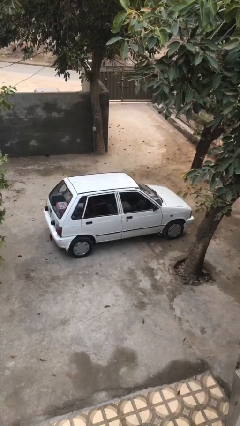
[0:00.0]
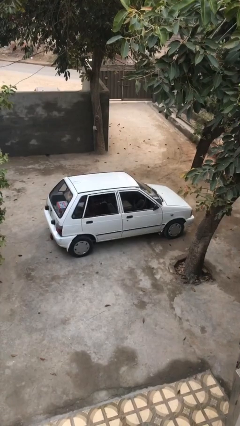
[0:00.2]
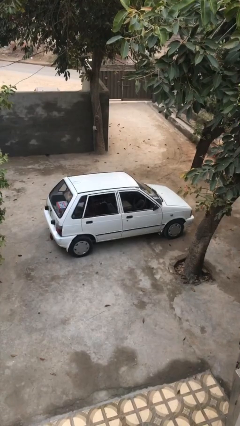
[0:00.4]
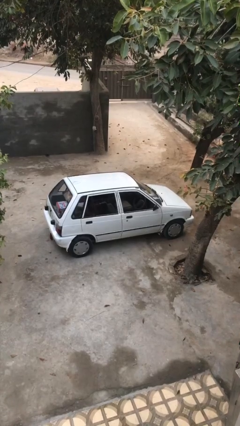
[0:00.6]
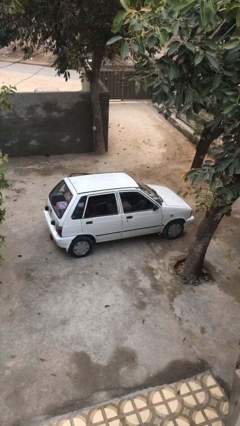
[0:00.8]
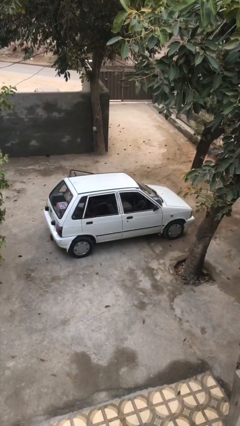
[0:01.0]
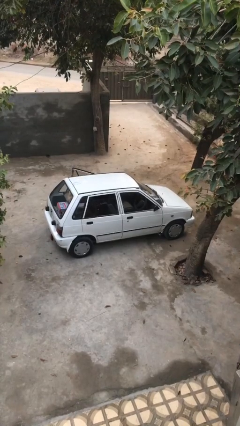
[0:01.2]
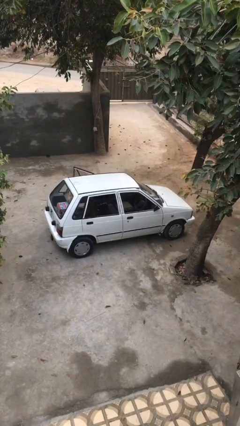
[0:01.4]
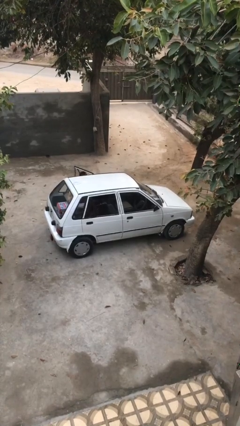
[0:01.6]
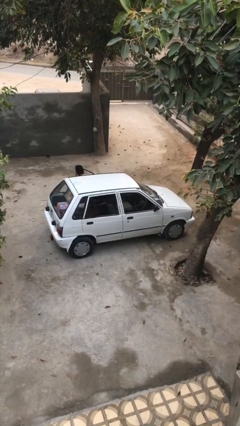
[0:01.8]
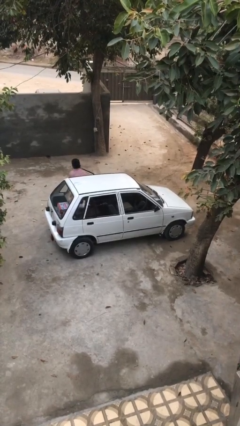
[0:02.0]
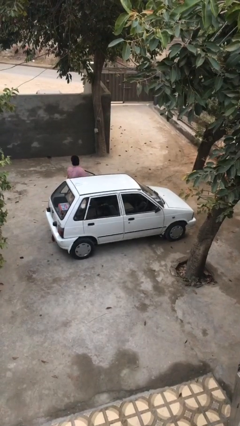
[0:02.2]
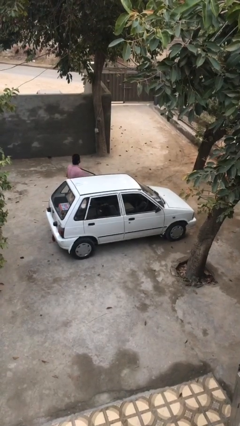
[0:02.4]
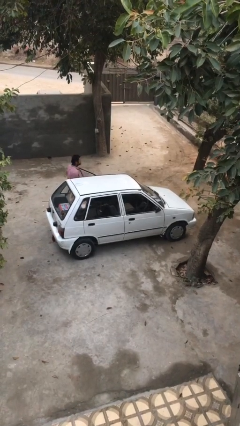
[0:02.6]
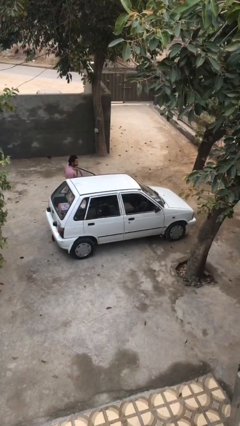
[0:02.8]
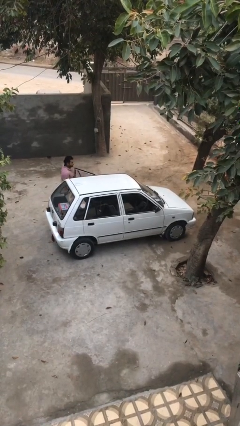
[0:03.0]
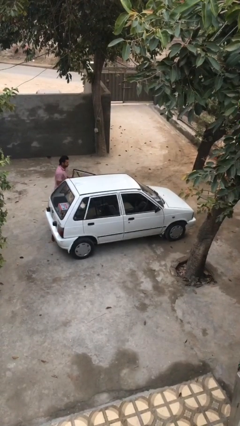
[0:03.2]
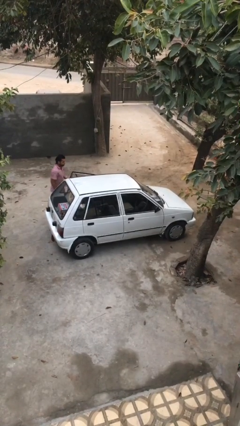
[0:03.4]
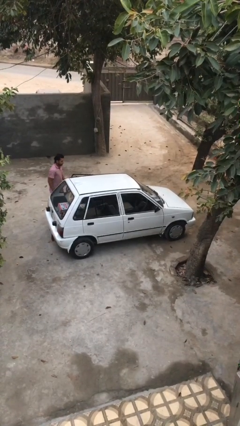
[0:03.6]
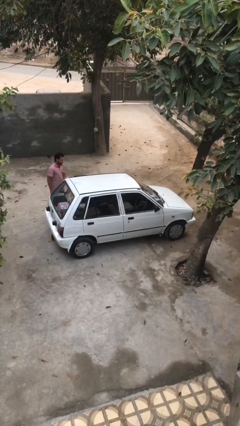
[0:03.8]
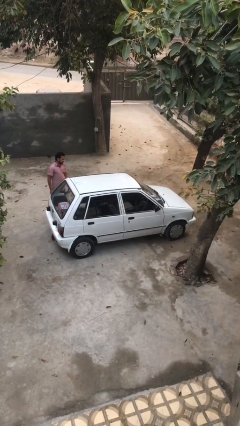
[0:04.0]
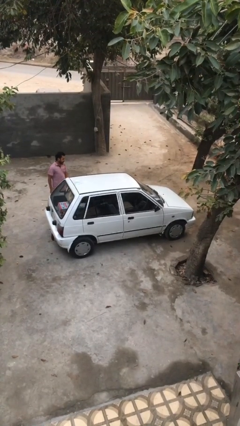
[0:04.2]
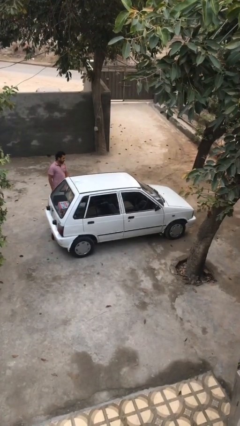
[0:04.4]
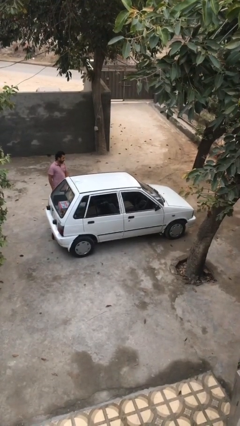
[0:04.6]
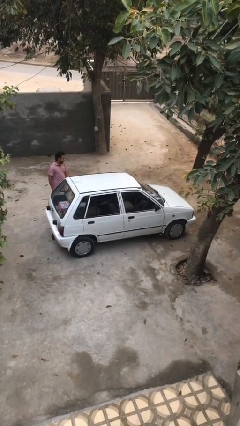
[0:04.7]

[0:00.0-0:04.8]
car drops off person

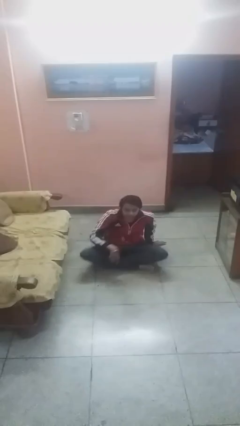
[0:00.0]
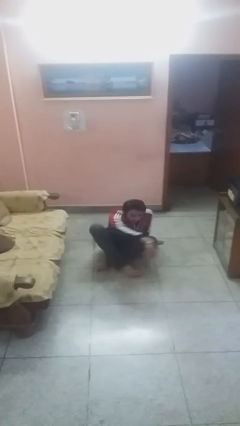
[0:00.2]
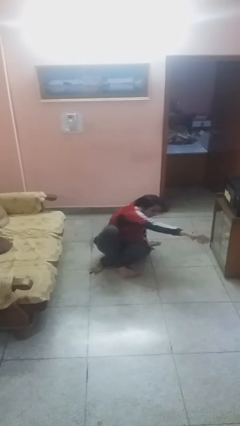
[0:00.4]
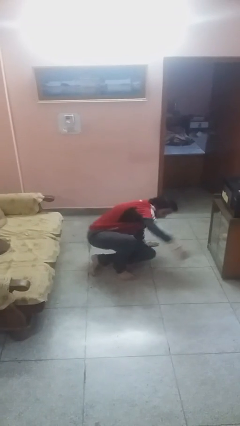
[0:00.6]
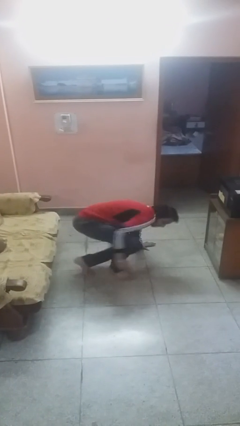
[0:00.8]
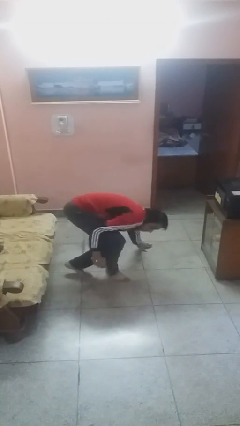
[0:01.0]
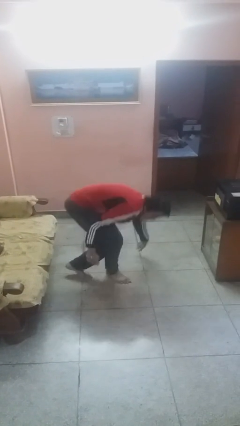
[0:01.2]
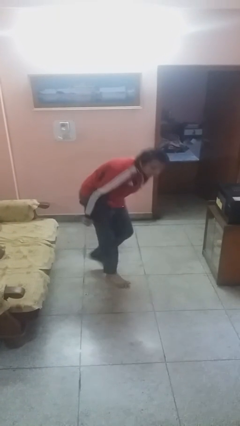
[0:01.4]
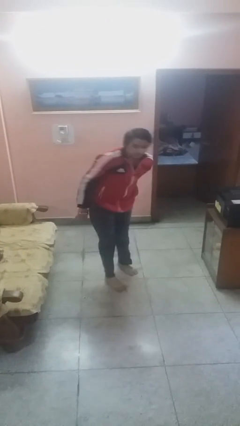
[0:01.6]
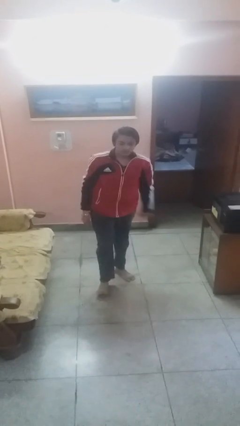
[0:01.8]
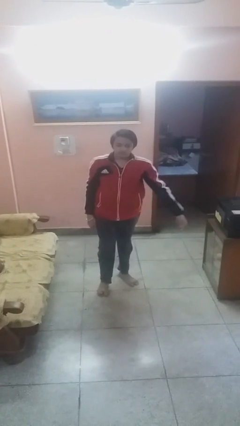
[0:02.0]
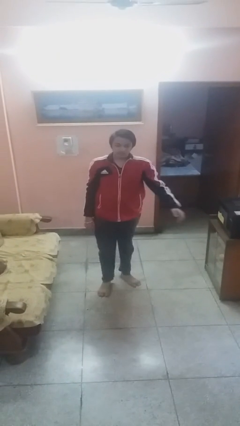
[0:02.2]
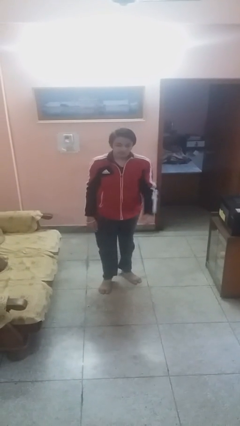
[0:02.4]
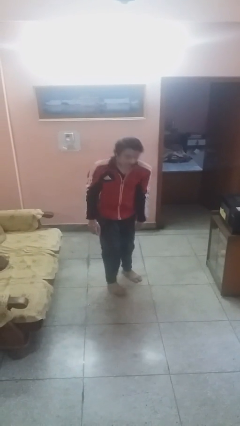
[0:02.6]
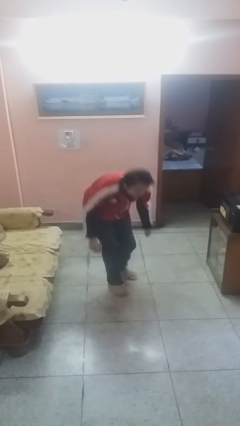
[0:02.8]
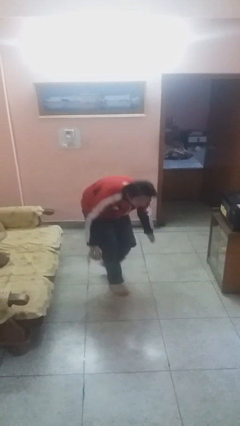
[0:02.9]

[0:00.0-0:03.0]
person stands up

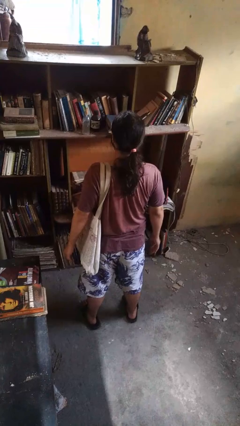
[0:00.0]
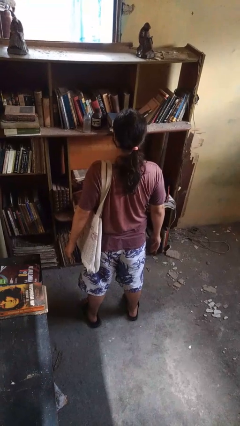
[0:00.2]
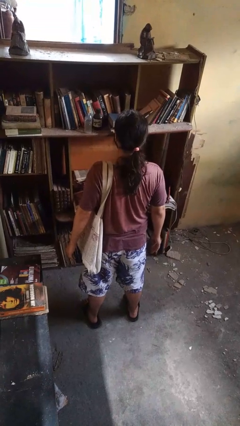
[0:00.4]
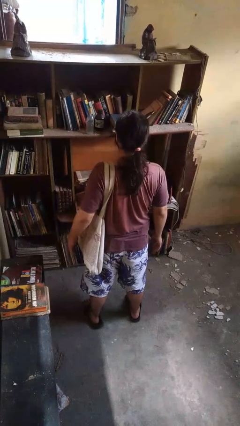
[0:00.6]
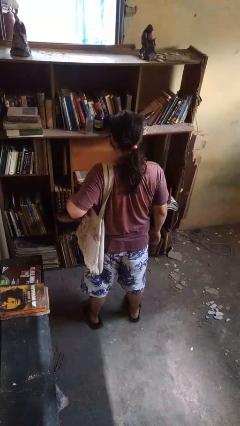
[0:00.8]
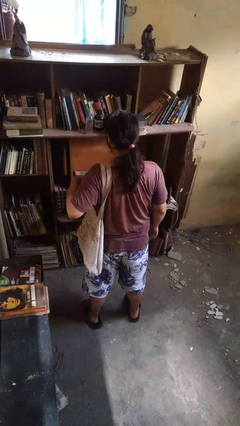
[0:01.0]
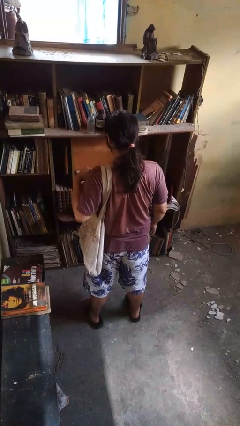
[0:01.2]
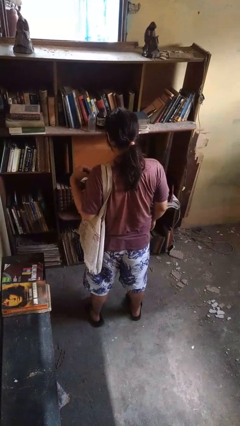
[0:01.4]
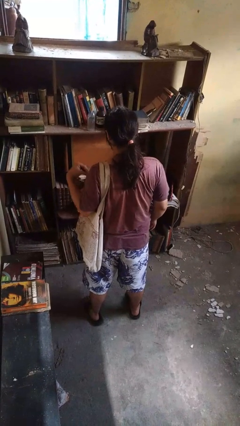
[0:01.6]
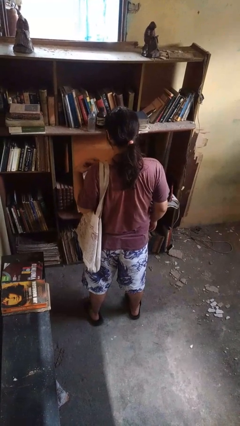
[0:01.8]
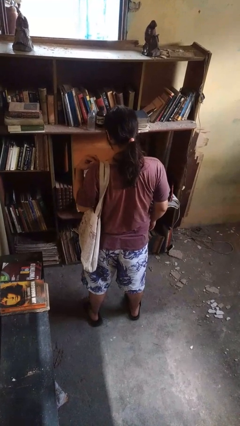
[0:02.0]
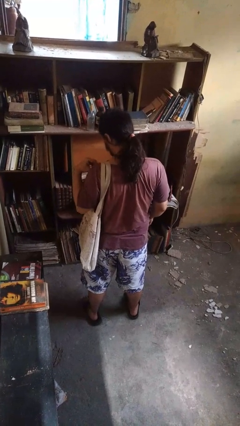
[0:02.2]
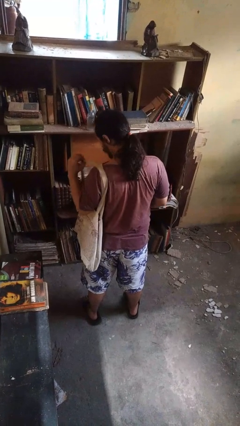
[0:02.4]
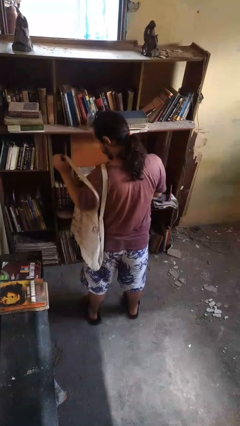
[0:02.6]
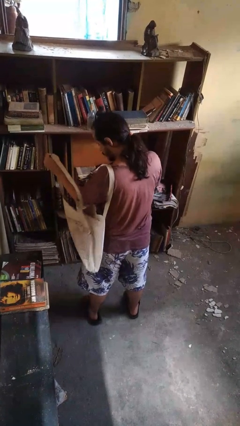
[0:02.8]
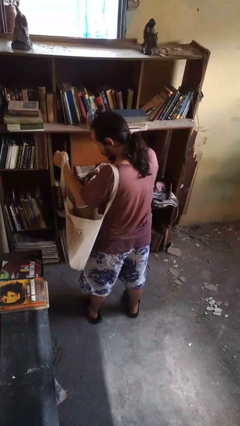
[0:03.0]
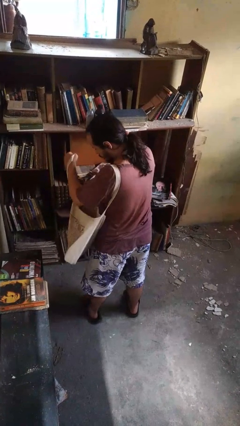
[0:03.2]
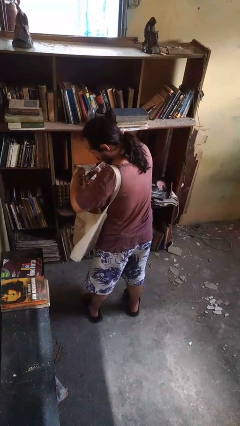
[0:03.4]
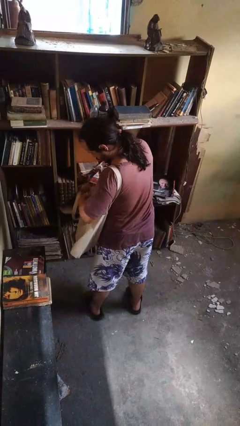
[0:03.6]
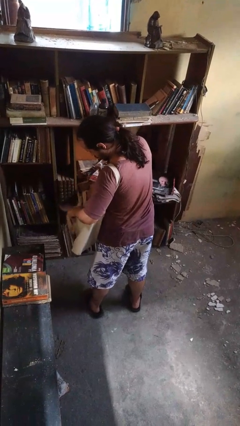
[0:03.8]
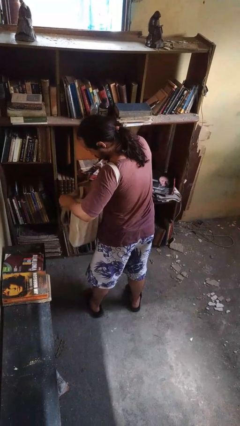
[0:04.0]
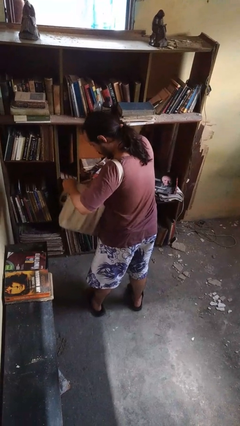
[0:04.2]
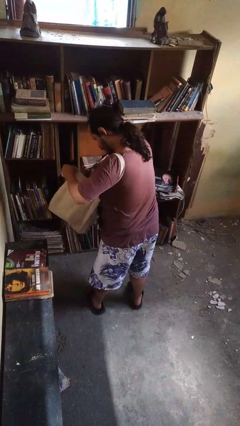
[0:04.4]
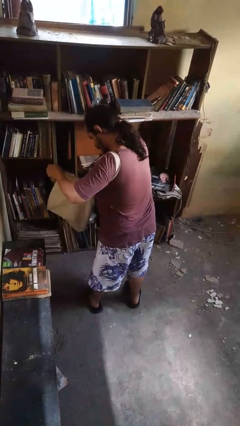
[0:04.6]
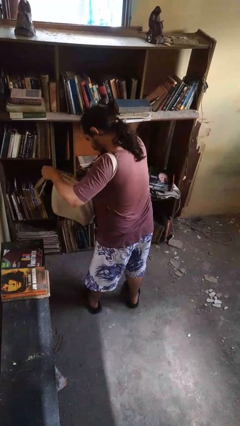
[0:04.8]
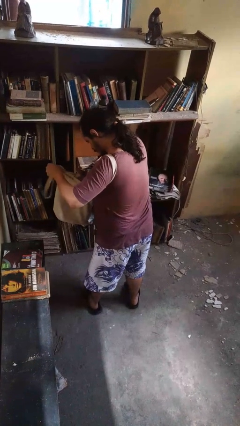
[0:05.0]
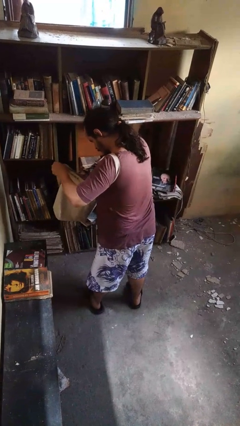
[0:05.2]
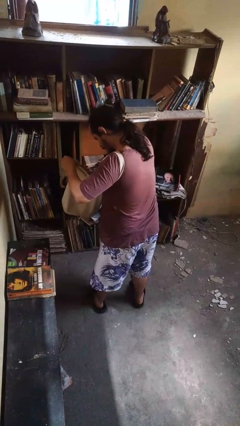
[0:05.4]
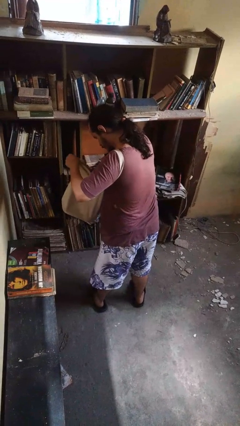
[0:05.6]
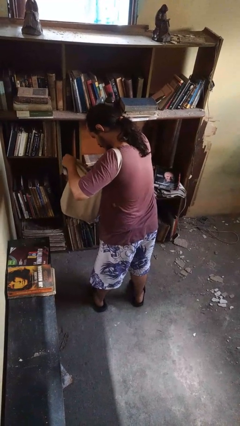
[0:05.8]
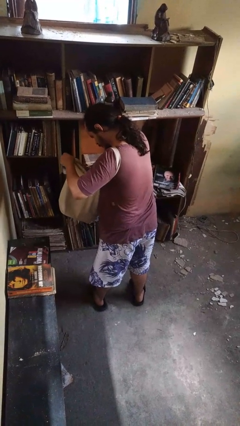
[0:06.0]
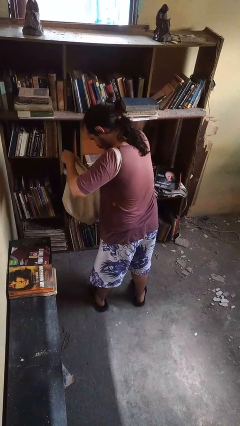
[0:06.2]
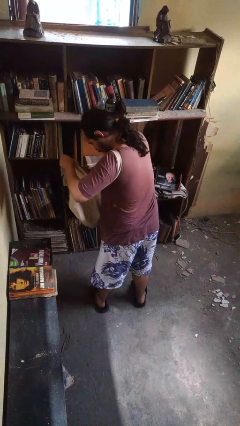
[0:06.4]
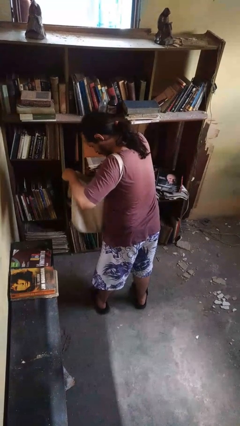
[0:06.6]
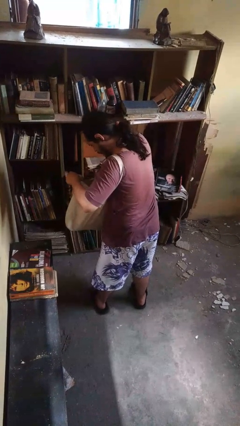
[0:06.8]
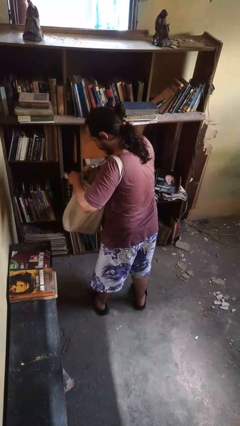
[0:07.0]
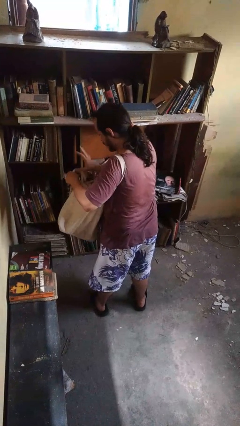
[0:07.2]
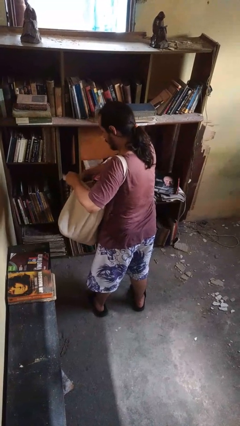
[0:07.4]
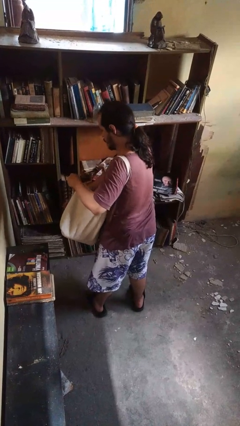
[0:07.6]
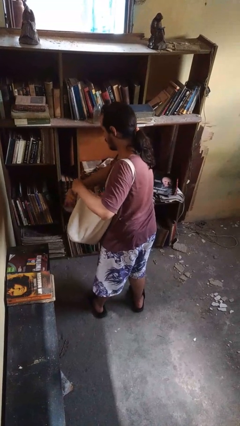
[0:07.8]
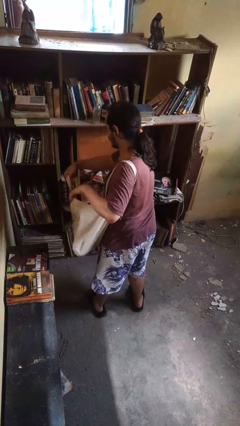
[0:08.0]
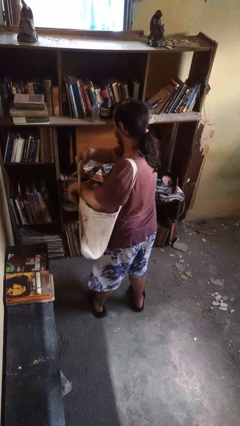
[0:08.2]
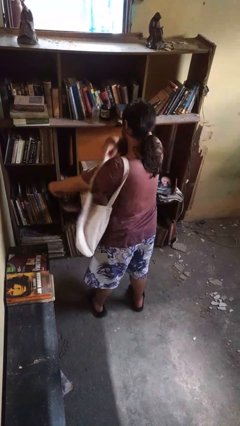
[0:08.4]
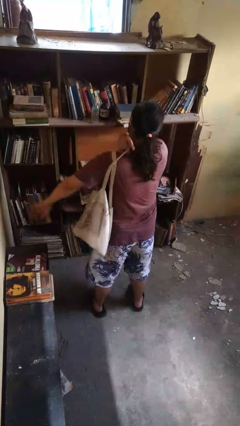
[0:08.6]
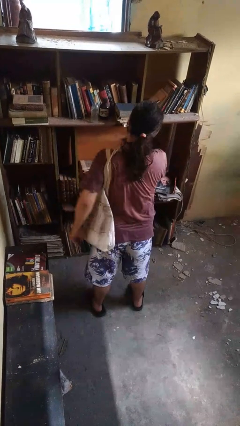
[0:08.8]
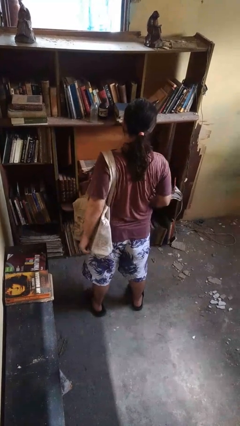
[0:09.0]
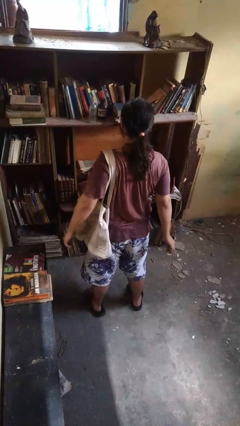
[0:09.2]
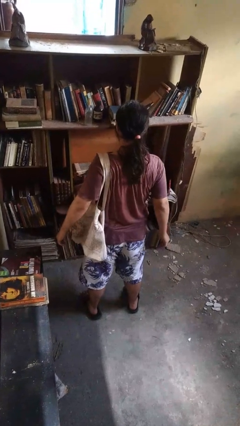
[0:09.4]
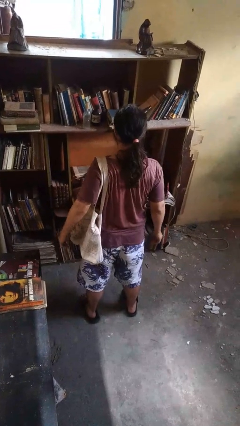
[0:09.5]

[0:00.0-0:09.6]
person searches in bag
